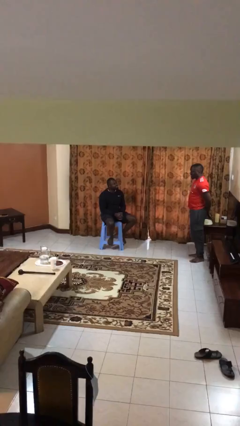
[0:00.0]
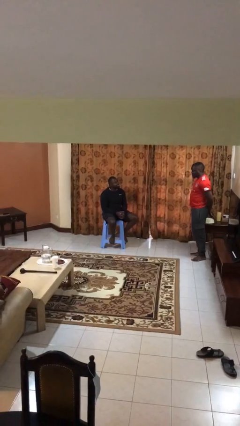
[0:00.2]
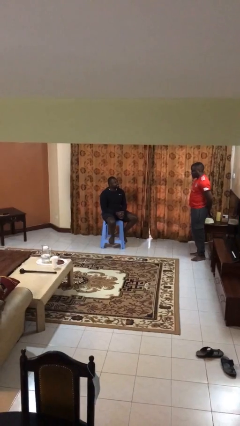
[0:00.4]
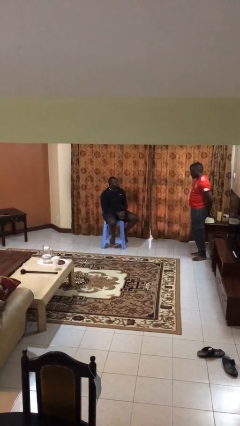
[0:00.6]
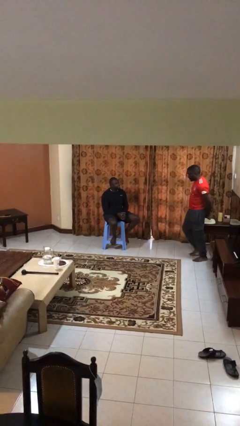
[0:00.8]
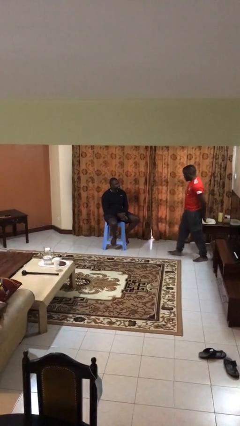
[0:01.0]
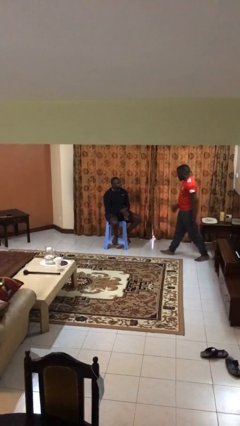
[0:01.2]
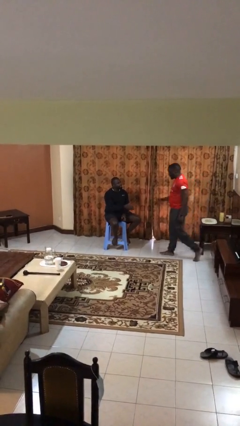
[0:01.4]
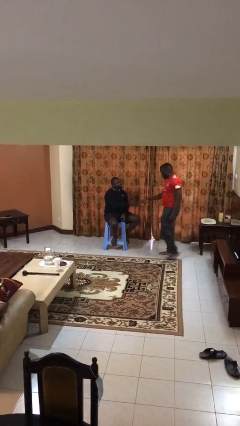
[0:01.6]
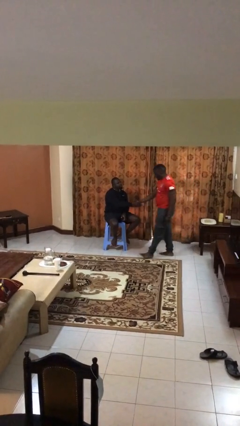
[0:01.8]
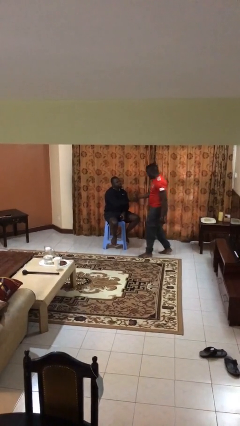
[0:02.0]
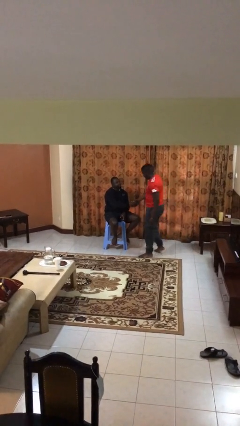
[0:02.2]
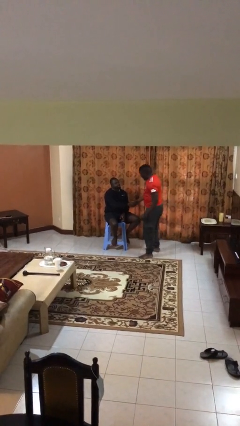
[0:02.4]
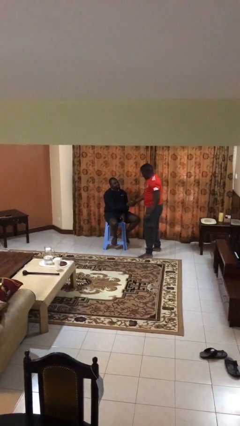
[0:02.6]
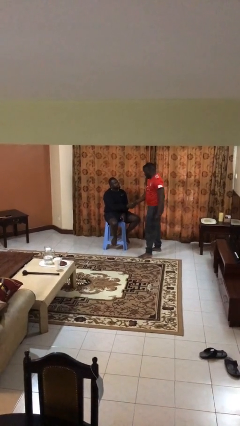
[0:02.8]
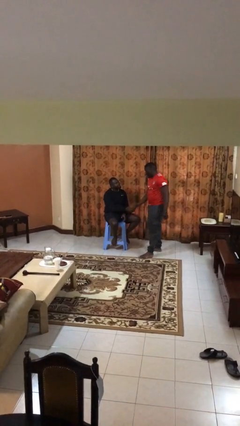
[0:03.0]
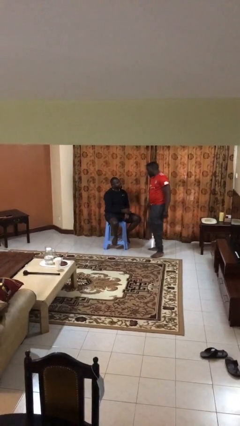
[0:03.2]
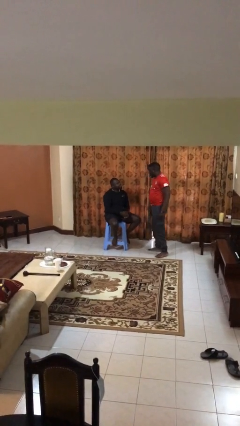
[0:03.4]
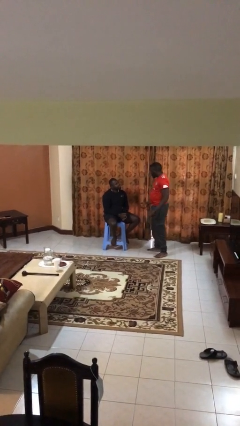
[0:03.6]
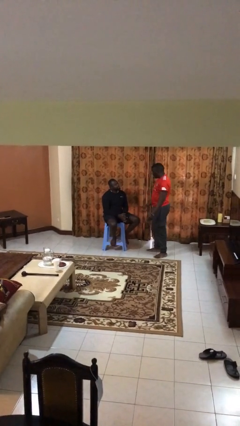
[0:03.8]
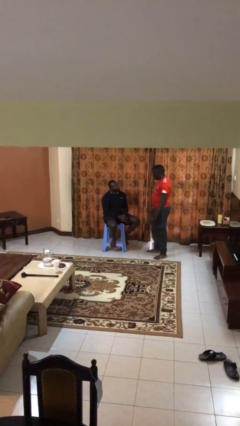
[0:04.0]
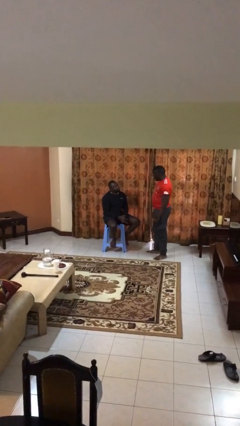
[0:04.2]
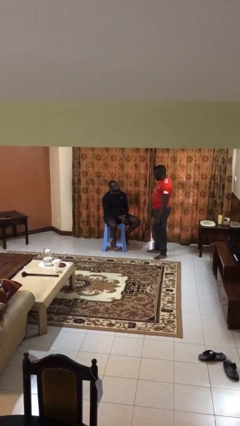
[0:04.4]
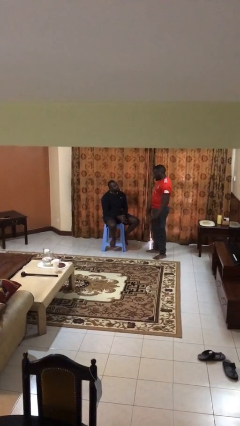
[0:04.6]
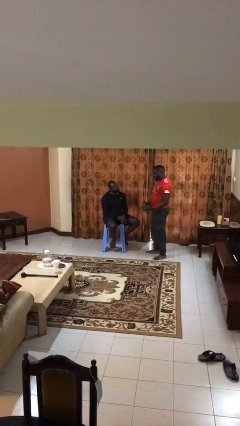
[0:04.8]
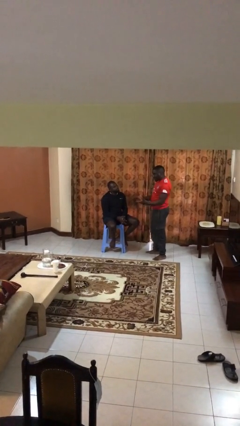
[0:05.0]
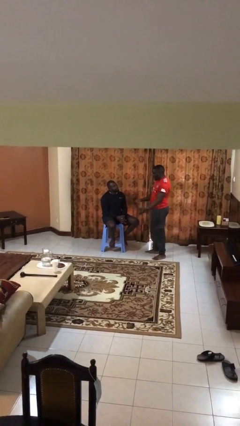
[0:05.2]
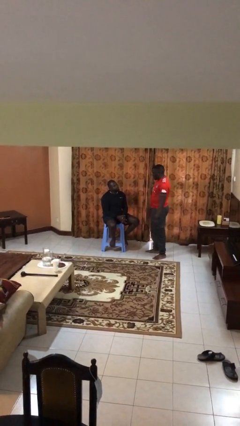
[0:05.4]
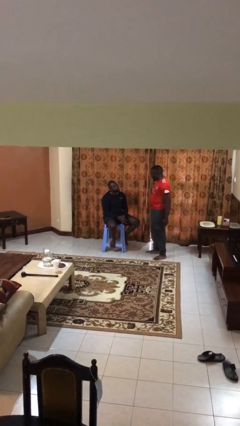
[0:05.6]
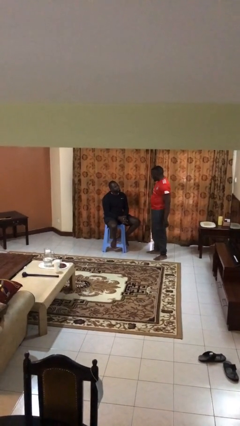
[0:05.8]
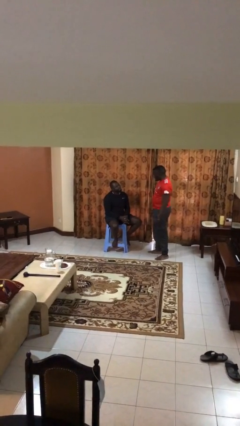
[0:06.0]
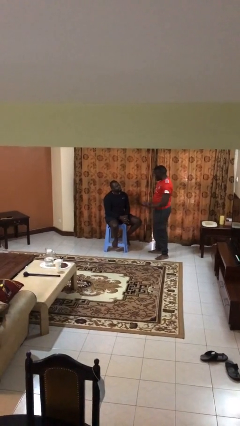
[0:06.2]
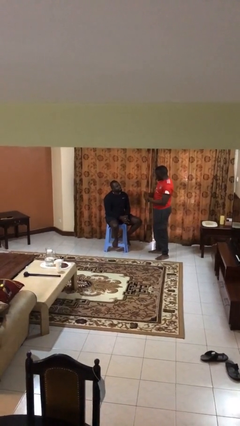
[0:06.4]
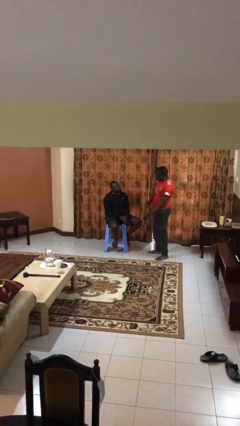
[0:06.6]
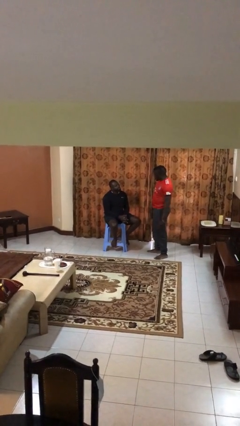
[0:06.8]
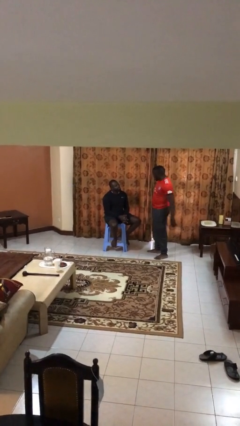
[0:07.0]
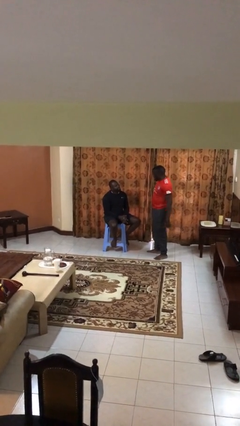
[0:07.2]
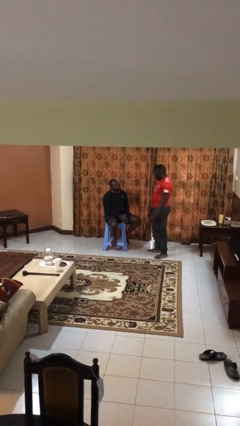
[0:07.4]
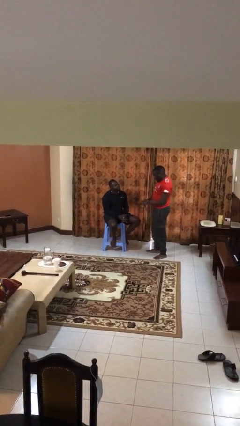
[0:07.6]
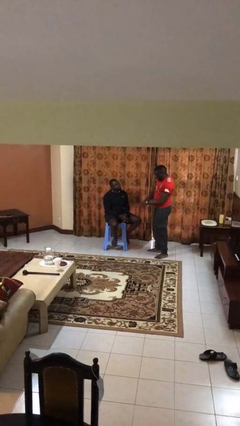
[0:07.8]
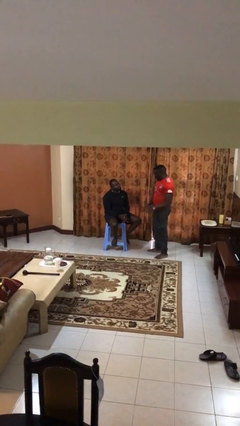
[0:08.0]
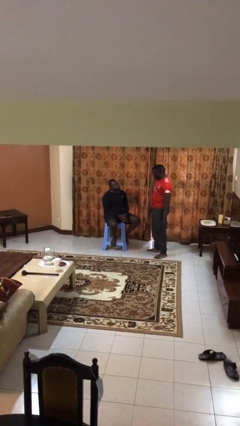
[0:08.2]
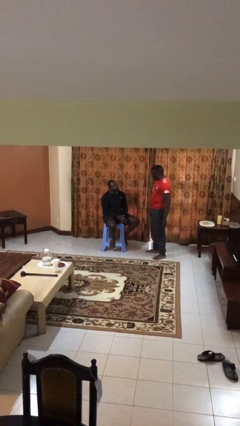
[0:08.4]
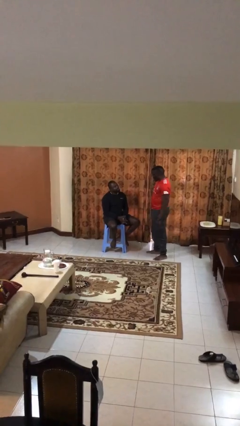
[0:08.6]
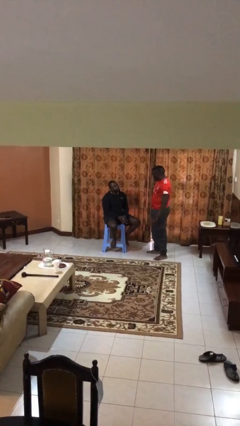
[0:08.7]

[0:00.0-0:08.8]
person shakes hand

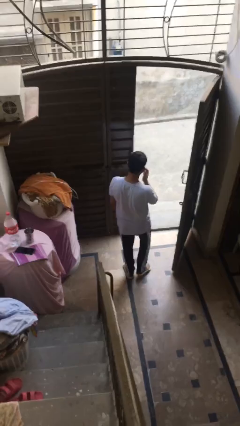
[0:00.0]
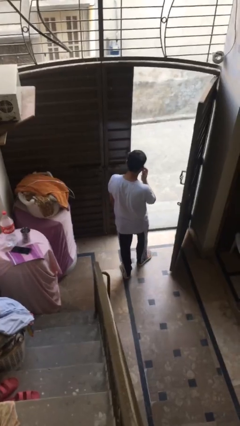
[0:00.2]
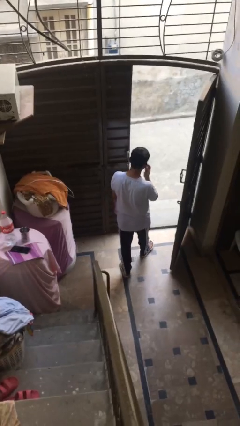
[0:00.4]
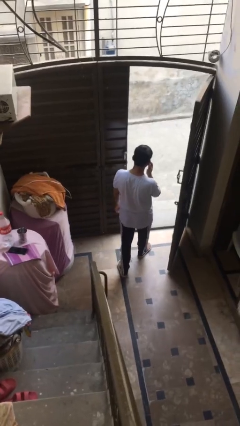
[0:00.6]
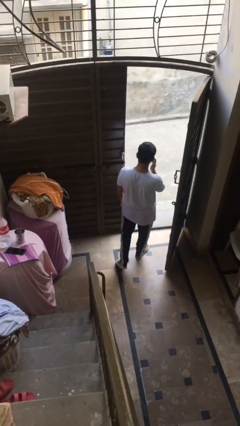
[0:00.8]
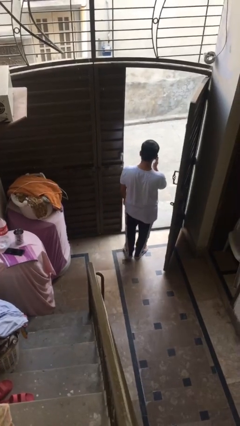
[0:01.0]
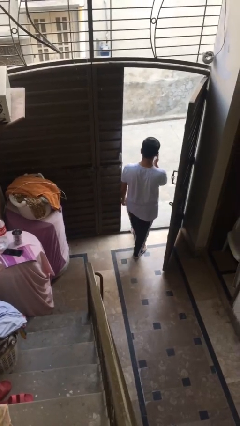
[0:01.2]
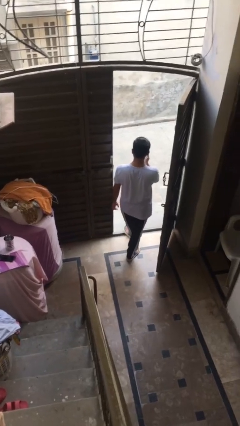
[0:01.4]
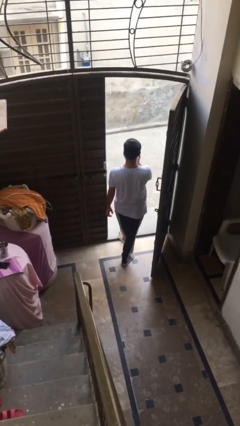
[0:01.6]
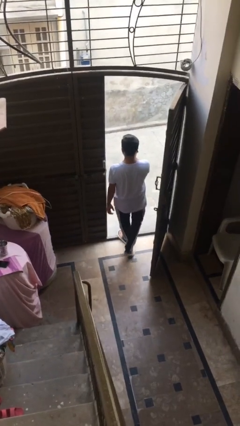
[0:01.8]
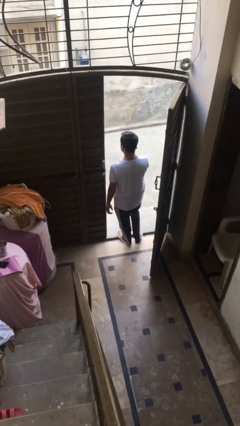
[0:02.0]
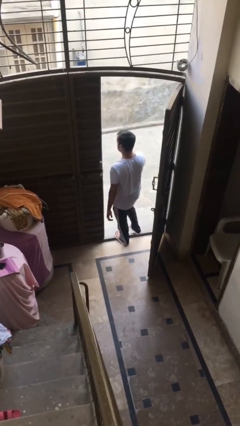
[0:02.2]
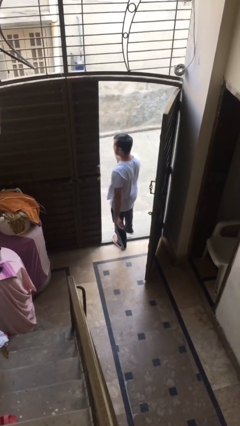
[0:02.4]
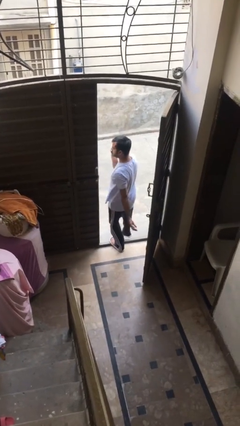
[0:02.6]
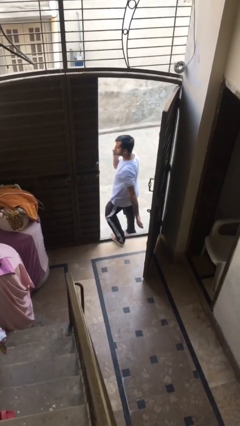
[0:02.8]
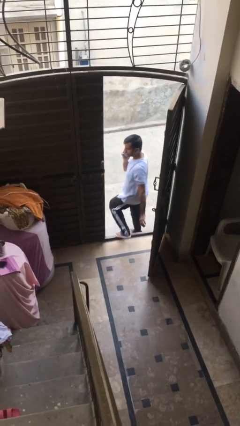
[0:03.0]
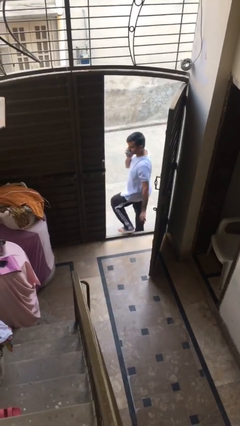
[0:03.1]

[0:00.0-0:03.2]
person exits scene through structure

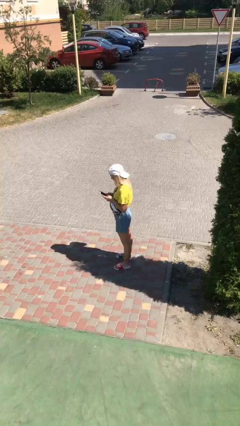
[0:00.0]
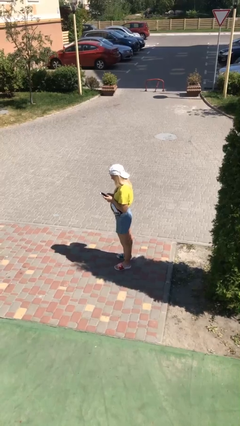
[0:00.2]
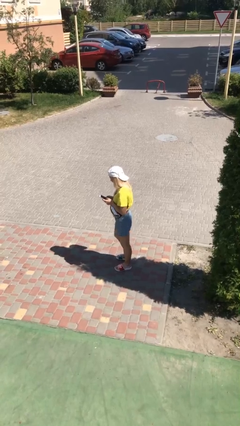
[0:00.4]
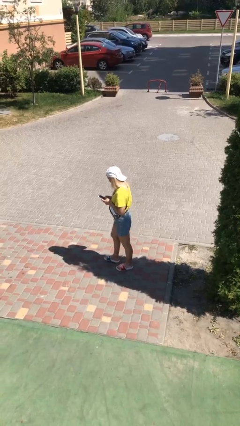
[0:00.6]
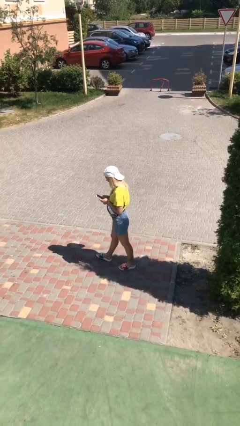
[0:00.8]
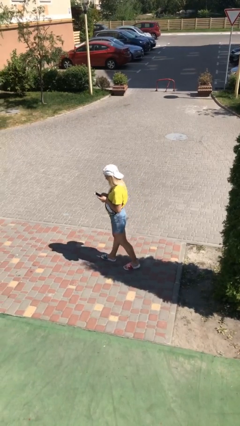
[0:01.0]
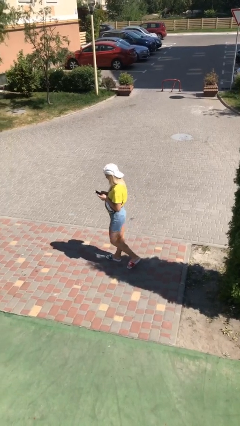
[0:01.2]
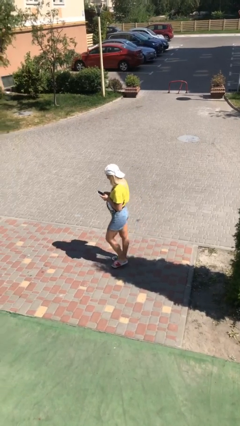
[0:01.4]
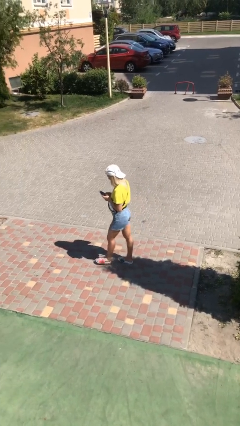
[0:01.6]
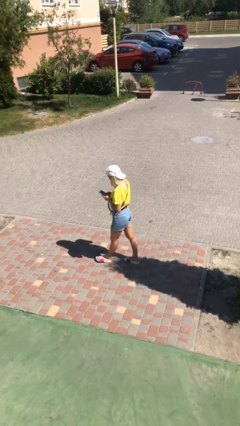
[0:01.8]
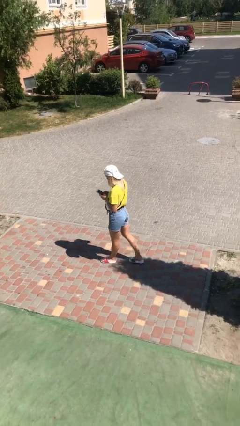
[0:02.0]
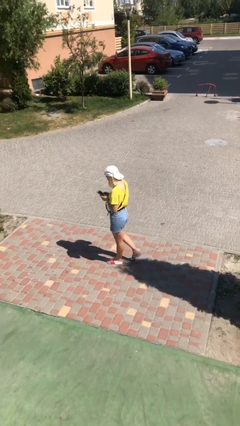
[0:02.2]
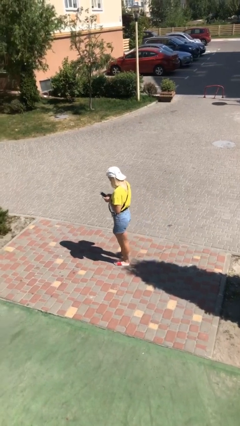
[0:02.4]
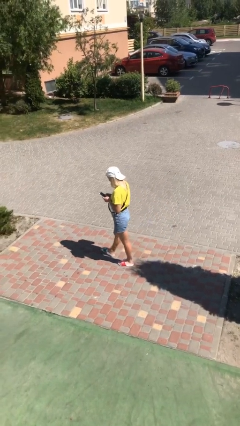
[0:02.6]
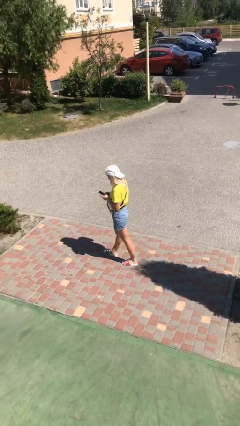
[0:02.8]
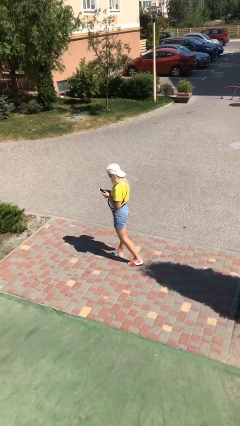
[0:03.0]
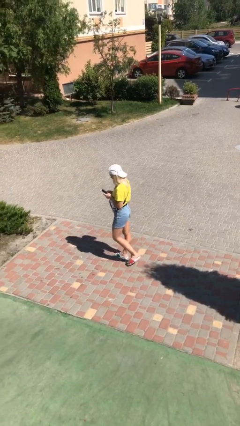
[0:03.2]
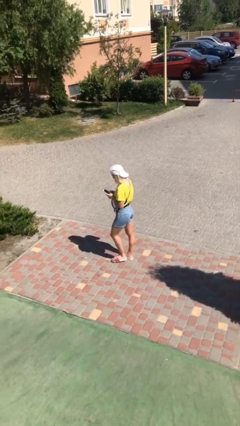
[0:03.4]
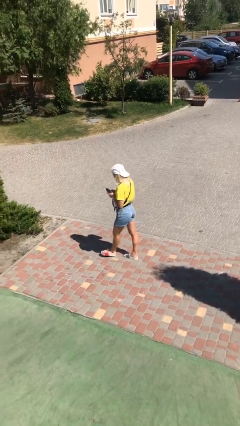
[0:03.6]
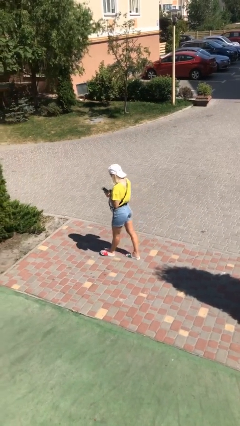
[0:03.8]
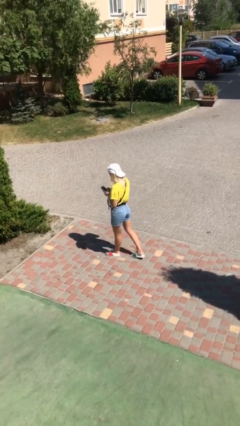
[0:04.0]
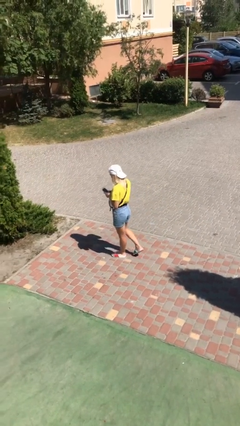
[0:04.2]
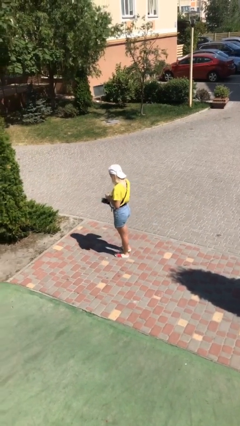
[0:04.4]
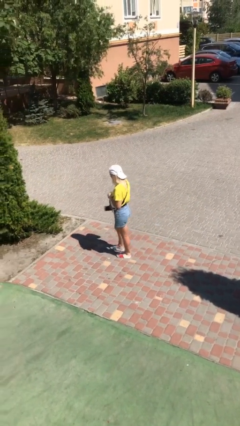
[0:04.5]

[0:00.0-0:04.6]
person texts on phone

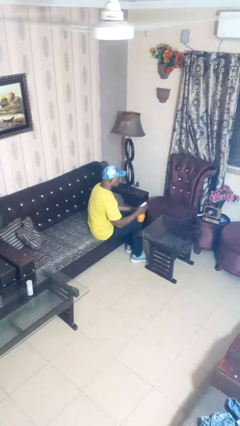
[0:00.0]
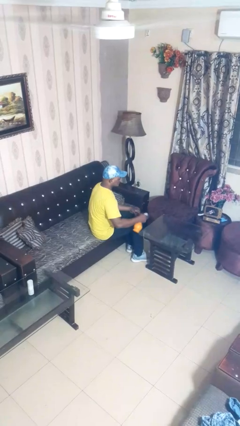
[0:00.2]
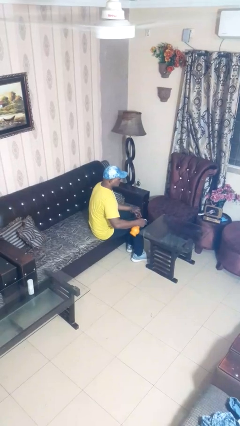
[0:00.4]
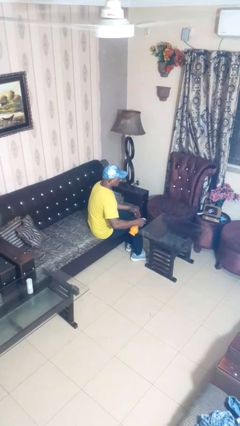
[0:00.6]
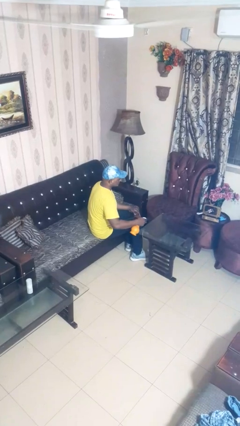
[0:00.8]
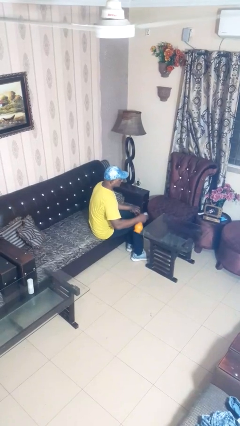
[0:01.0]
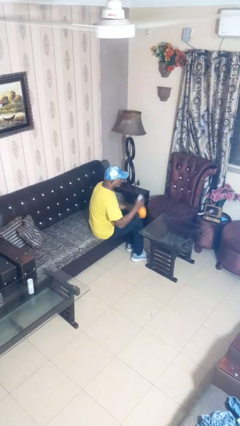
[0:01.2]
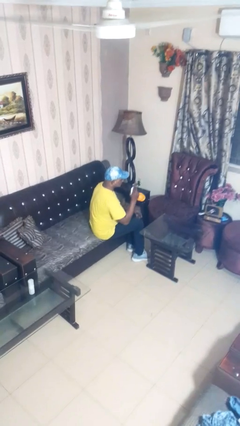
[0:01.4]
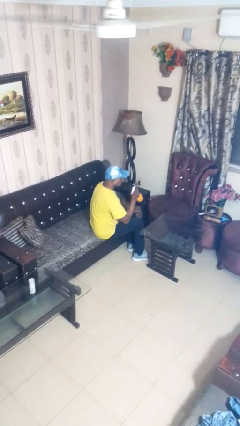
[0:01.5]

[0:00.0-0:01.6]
person sprays from bottle
